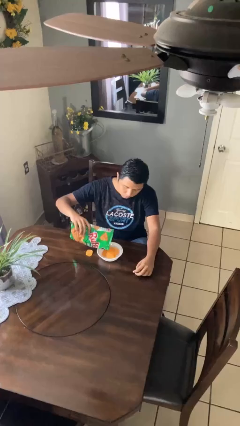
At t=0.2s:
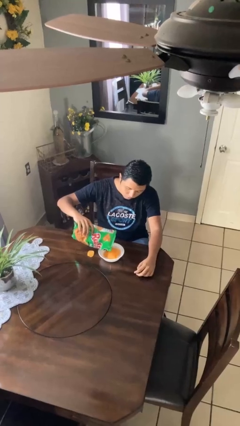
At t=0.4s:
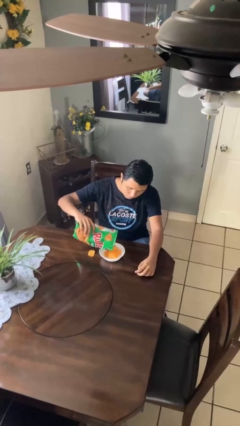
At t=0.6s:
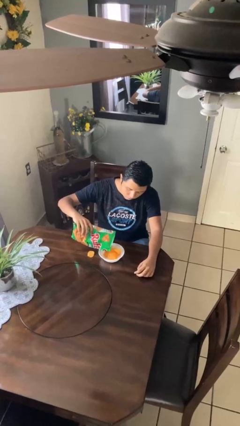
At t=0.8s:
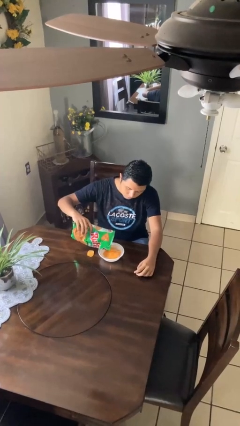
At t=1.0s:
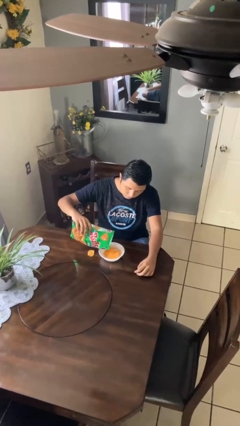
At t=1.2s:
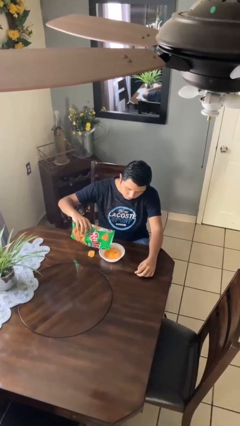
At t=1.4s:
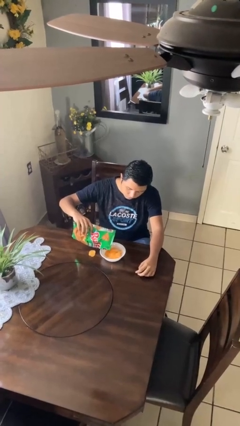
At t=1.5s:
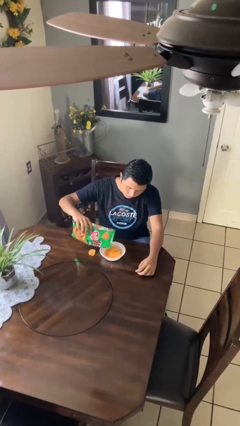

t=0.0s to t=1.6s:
person pours into bowl

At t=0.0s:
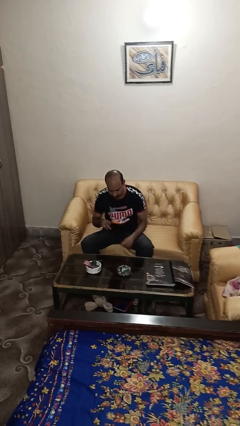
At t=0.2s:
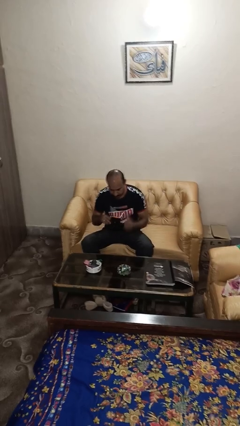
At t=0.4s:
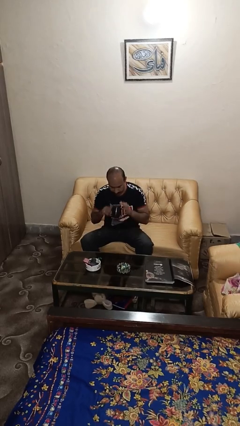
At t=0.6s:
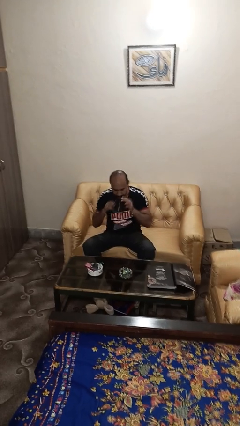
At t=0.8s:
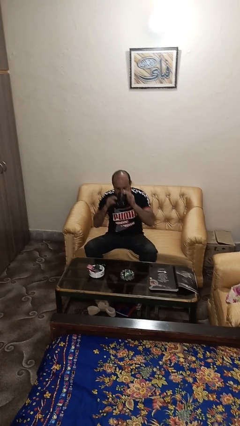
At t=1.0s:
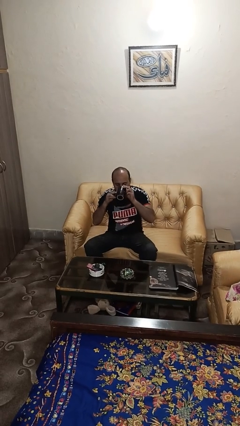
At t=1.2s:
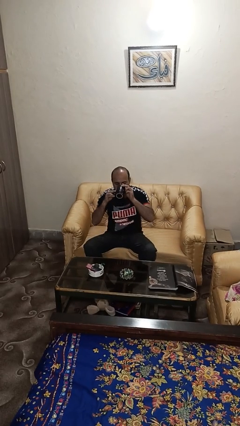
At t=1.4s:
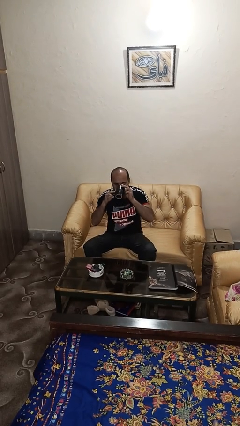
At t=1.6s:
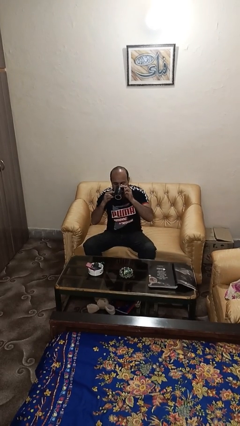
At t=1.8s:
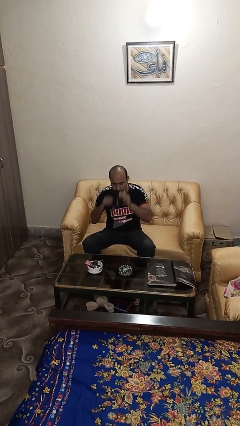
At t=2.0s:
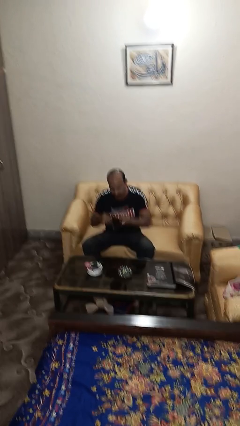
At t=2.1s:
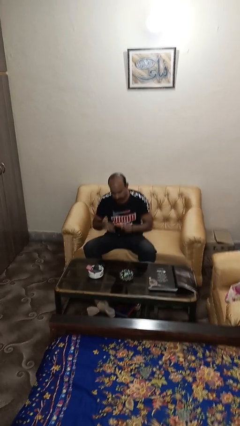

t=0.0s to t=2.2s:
person drinks from mug

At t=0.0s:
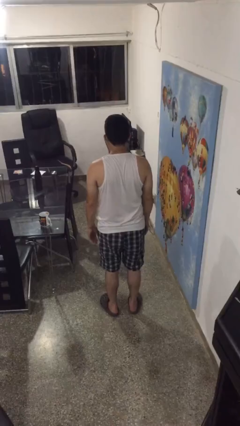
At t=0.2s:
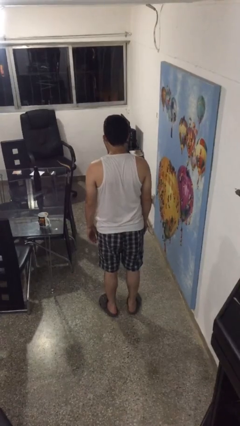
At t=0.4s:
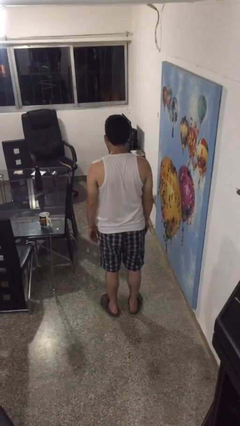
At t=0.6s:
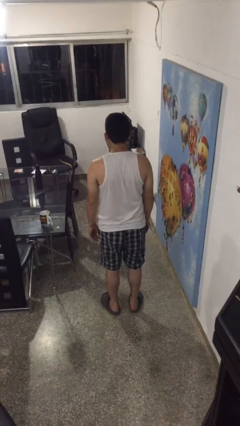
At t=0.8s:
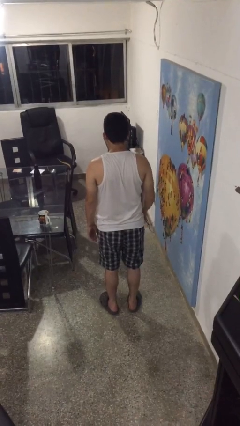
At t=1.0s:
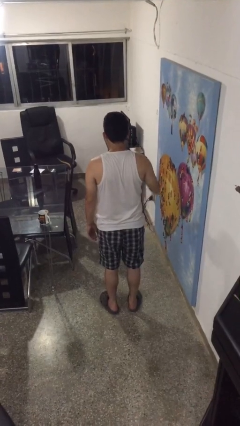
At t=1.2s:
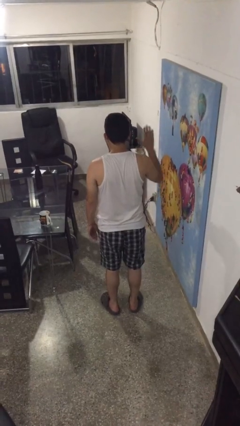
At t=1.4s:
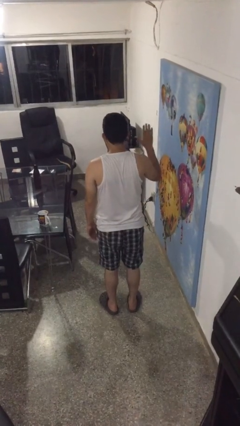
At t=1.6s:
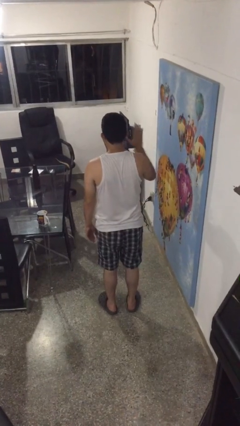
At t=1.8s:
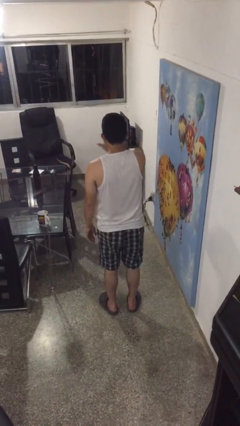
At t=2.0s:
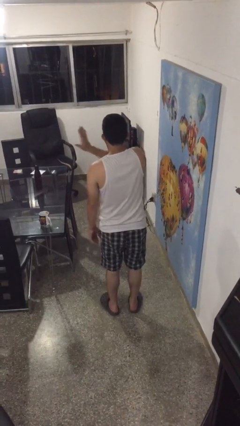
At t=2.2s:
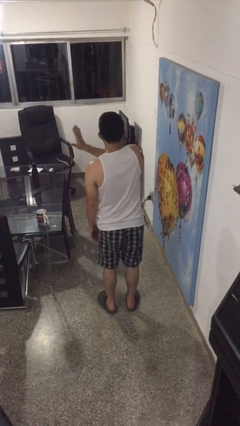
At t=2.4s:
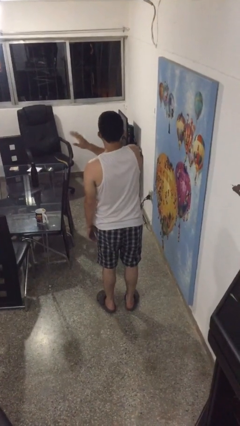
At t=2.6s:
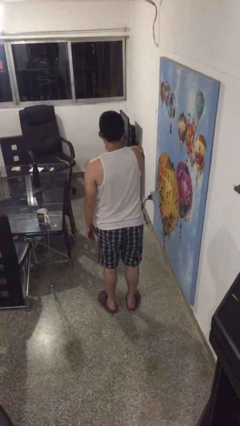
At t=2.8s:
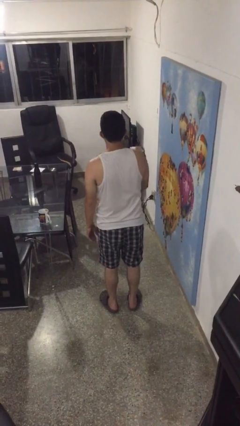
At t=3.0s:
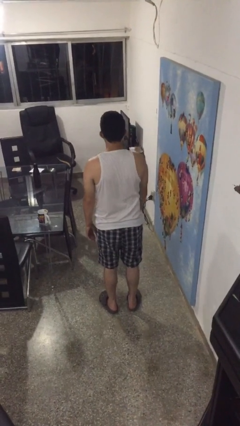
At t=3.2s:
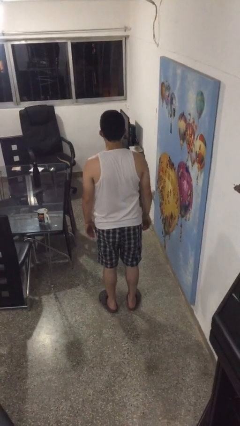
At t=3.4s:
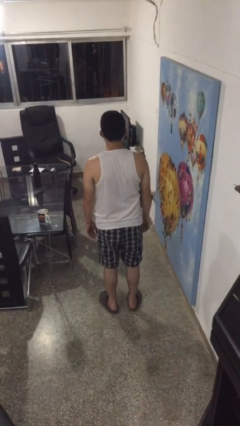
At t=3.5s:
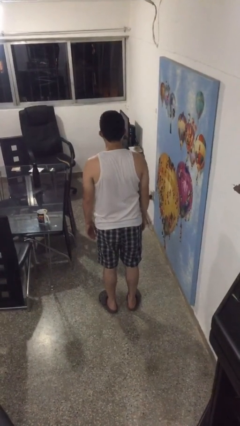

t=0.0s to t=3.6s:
person gestures swipe left

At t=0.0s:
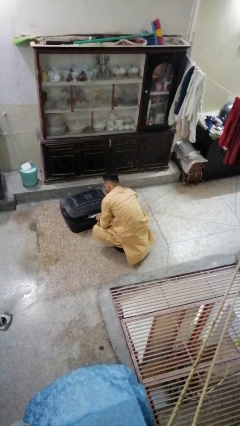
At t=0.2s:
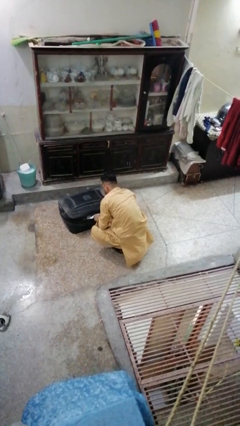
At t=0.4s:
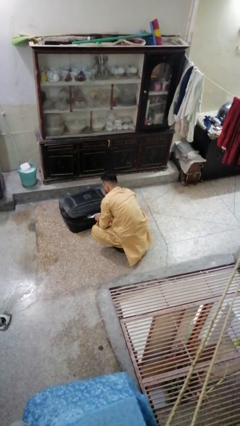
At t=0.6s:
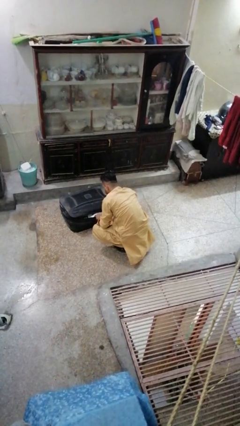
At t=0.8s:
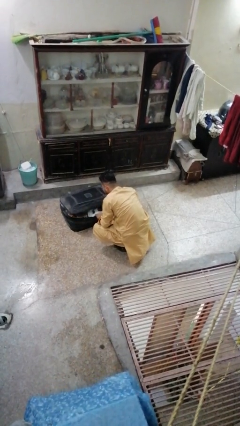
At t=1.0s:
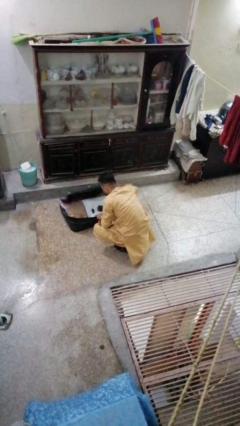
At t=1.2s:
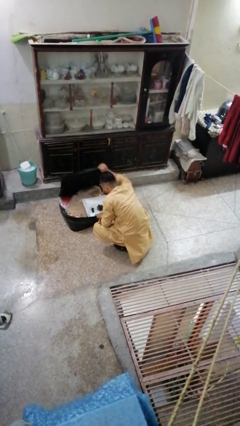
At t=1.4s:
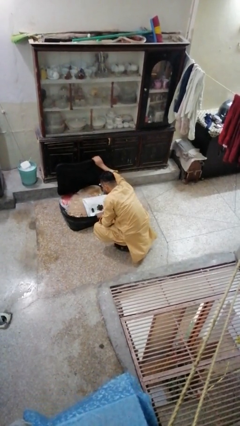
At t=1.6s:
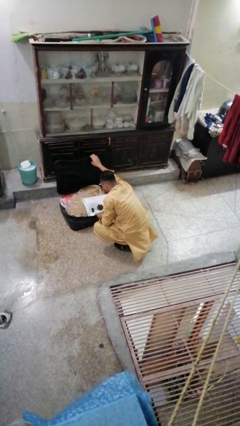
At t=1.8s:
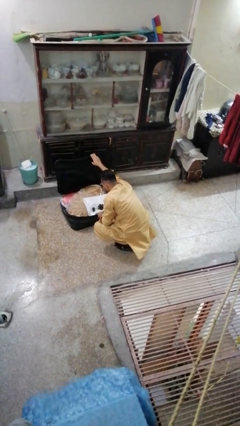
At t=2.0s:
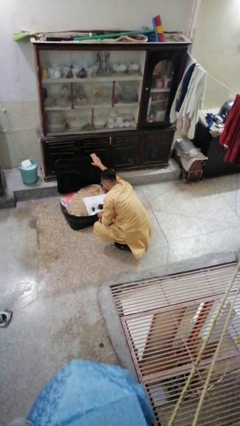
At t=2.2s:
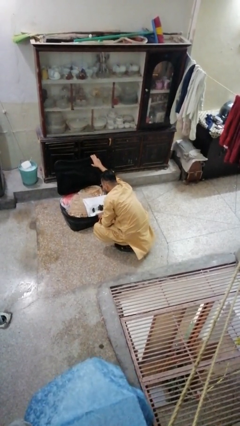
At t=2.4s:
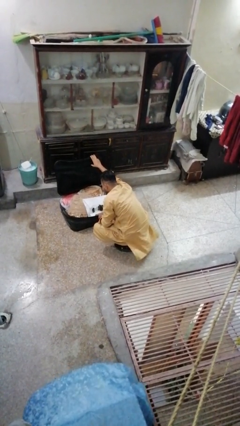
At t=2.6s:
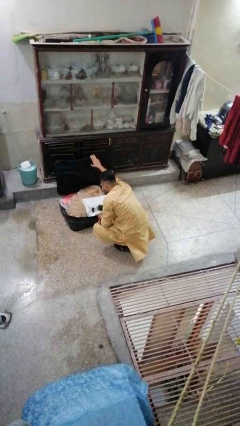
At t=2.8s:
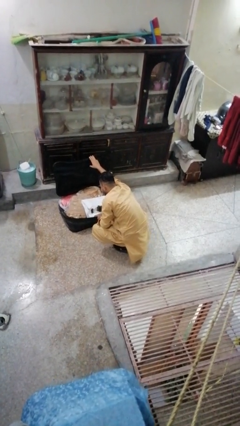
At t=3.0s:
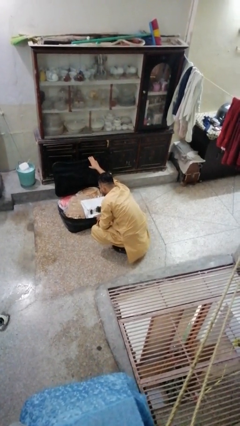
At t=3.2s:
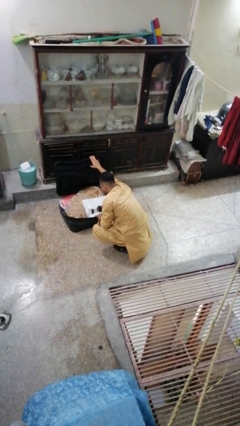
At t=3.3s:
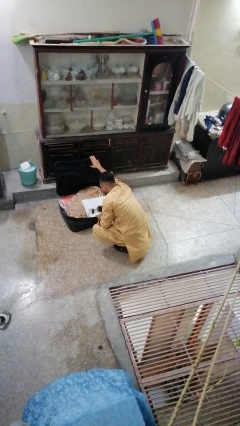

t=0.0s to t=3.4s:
person opens suitcase

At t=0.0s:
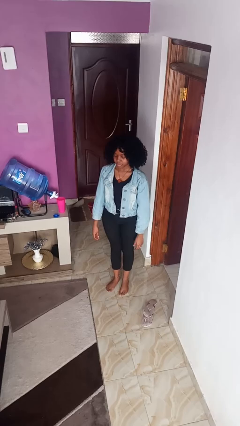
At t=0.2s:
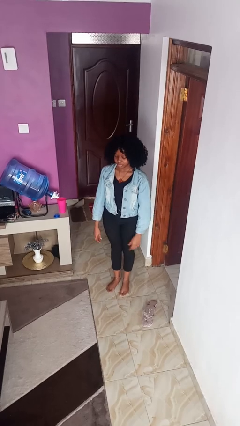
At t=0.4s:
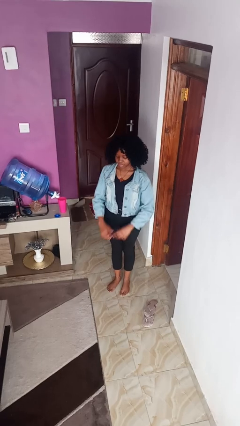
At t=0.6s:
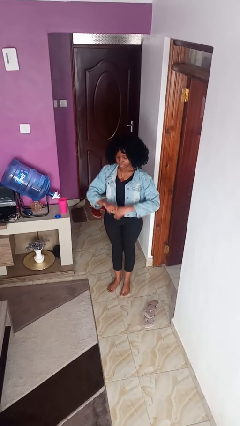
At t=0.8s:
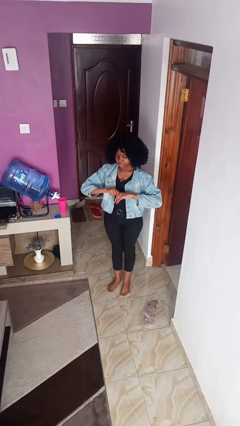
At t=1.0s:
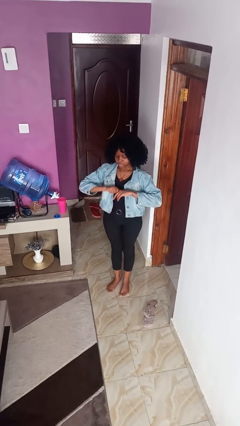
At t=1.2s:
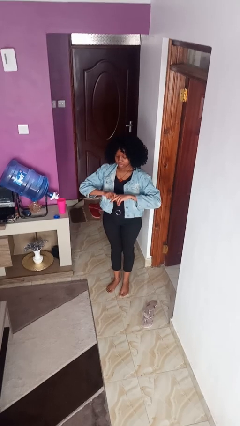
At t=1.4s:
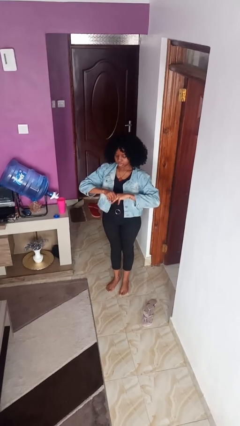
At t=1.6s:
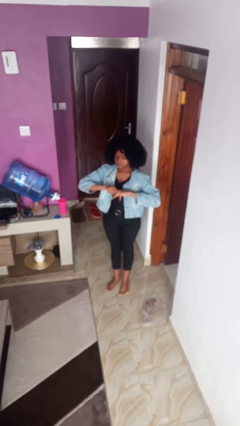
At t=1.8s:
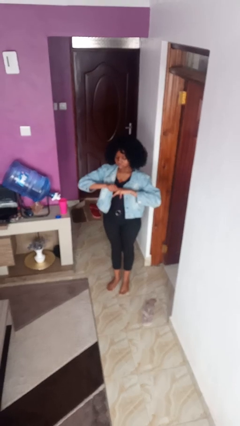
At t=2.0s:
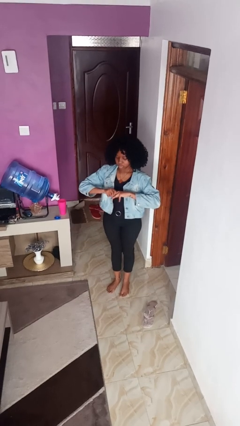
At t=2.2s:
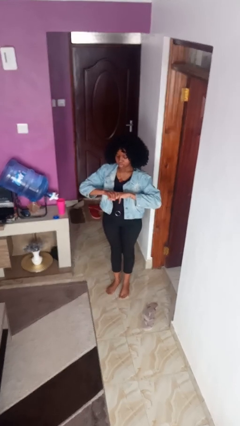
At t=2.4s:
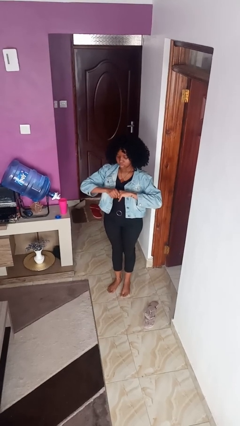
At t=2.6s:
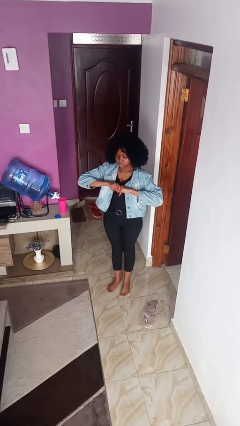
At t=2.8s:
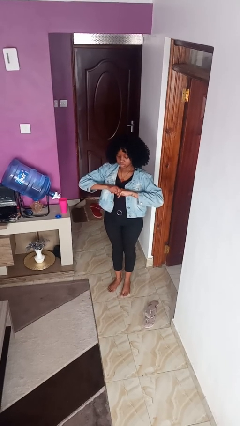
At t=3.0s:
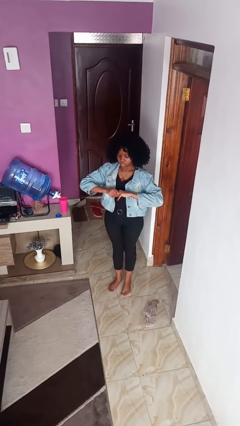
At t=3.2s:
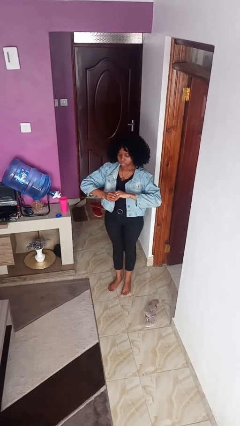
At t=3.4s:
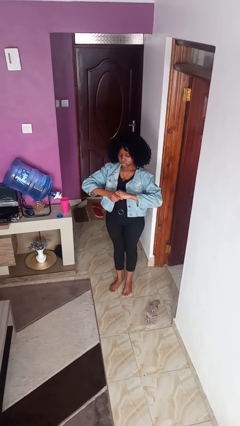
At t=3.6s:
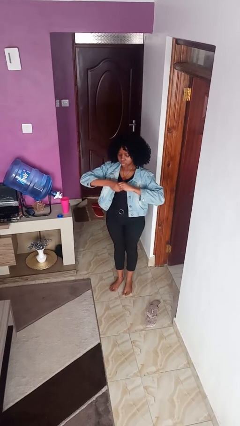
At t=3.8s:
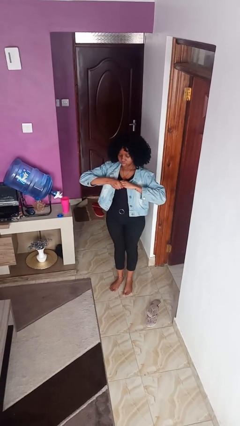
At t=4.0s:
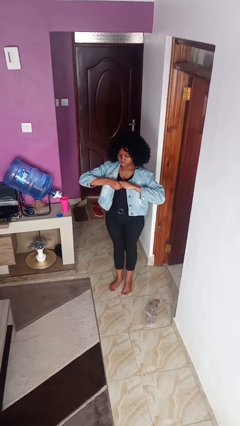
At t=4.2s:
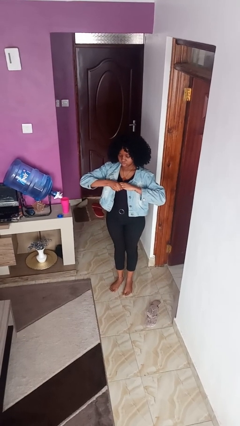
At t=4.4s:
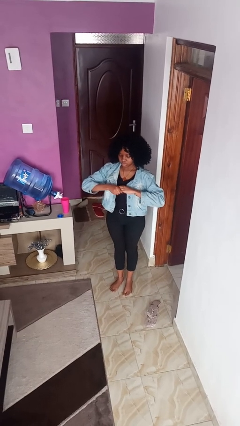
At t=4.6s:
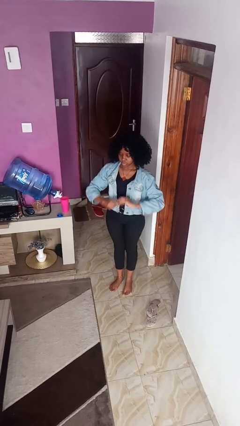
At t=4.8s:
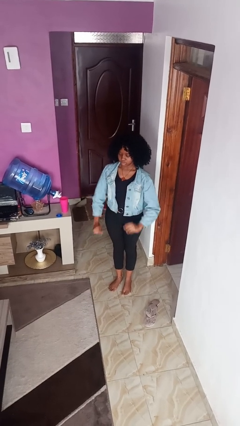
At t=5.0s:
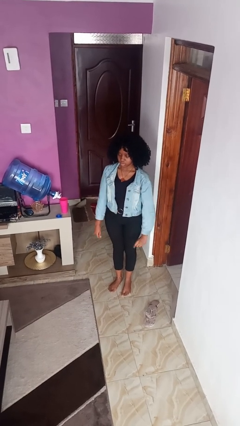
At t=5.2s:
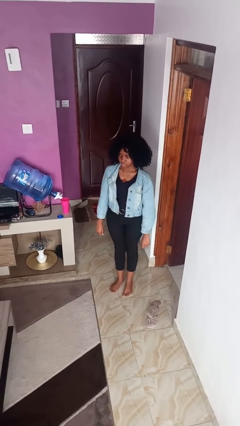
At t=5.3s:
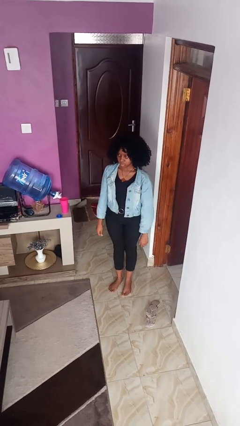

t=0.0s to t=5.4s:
person cracks knuckles

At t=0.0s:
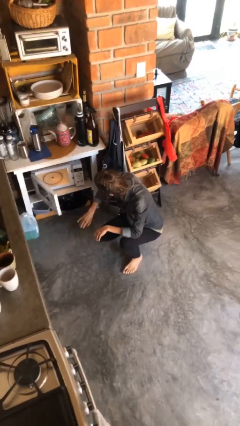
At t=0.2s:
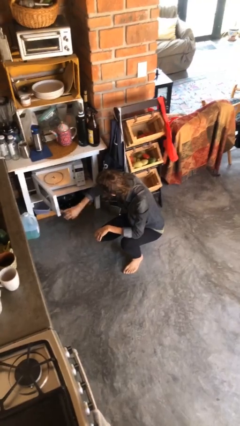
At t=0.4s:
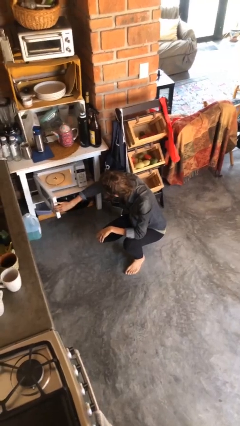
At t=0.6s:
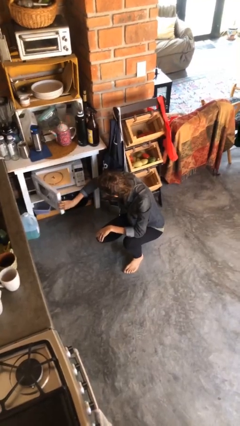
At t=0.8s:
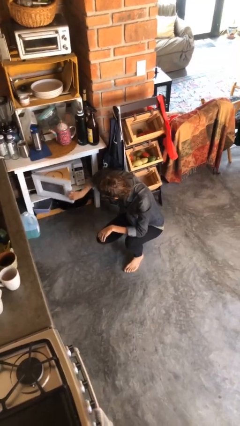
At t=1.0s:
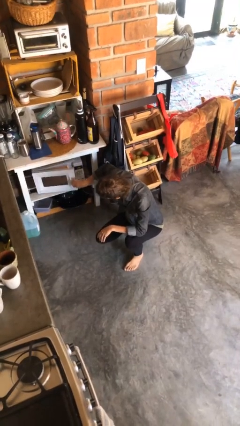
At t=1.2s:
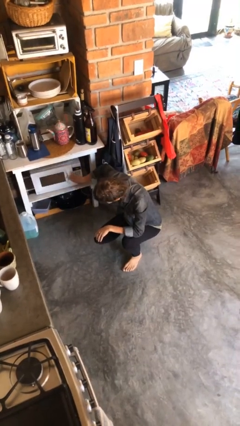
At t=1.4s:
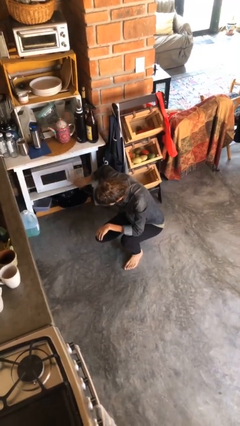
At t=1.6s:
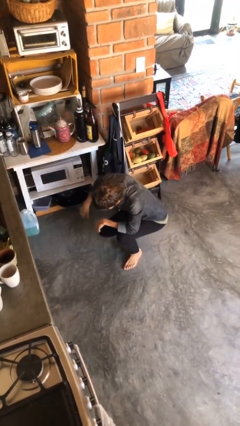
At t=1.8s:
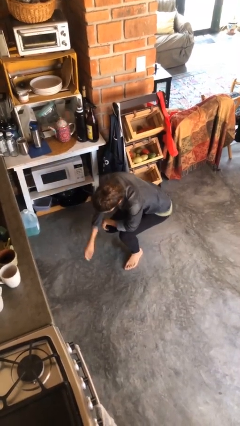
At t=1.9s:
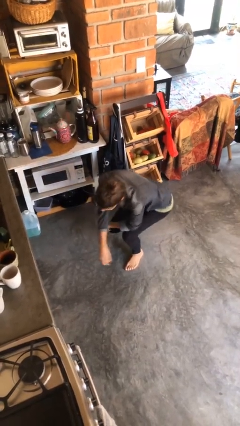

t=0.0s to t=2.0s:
person closes microwave
